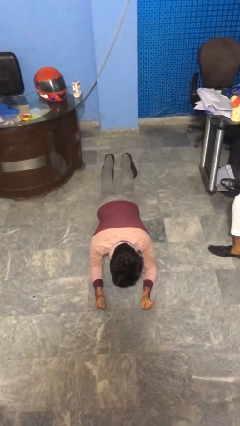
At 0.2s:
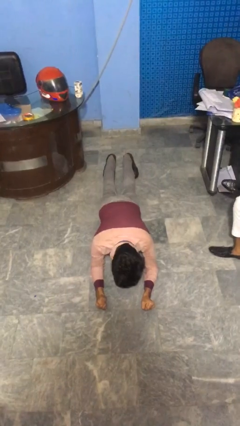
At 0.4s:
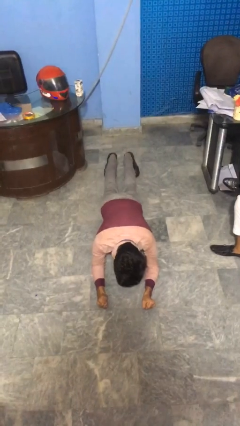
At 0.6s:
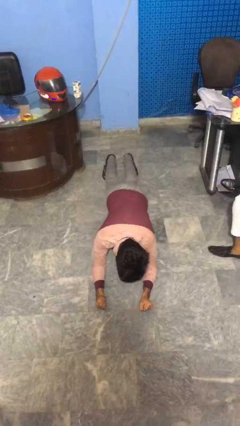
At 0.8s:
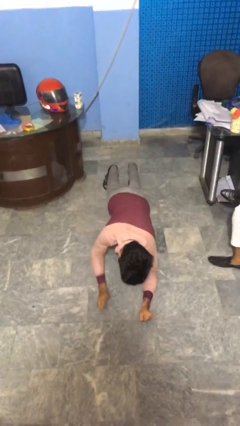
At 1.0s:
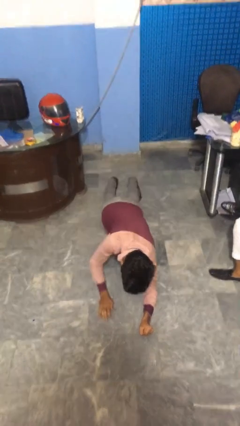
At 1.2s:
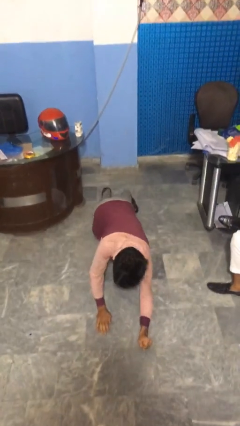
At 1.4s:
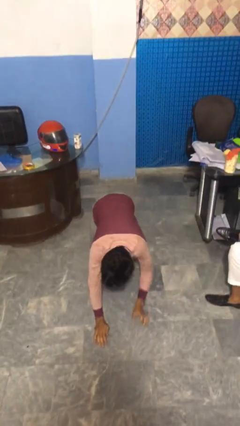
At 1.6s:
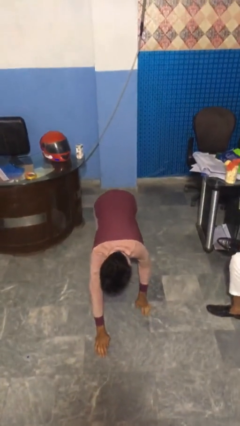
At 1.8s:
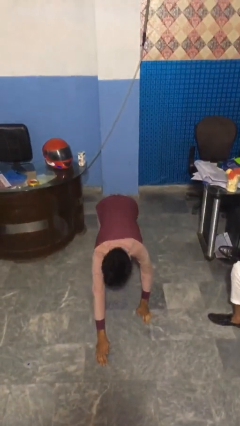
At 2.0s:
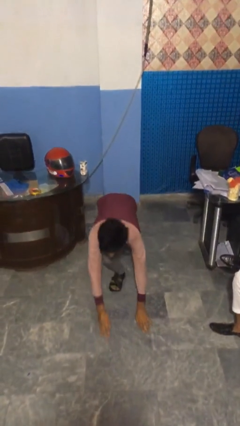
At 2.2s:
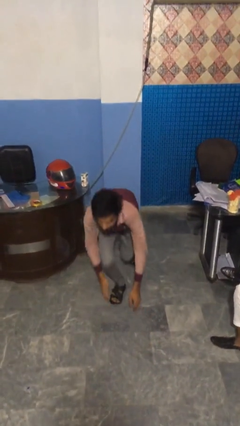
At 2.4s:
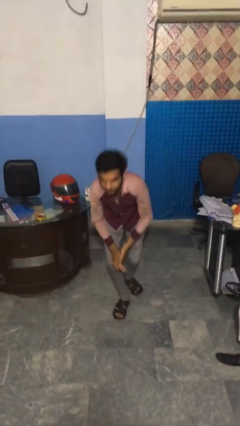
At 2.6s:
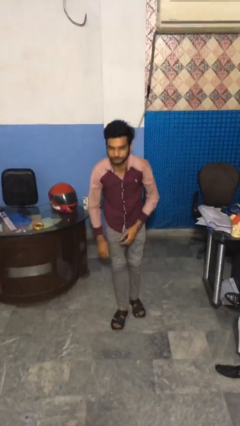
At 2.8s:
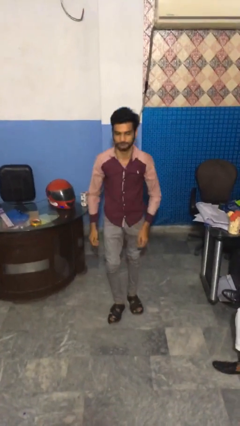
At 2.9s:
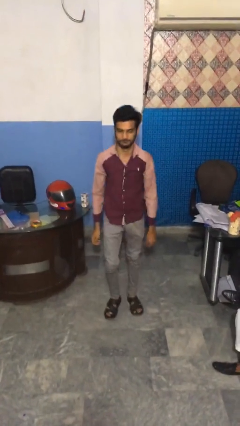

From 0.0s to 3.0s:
person stands up from floor

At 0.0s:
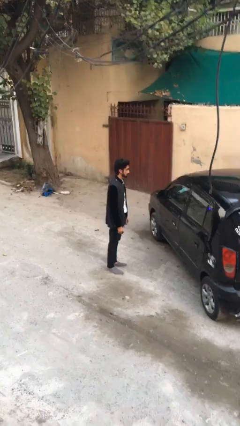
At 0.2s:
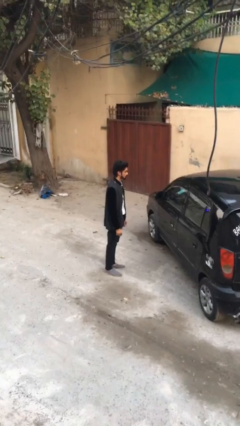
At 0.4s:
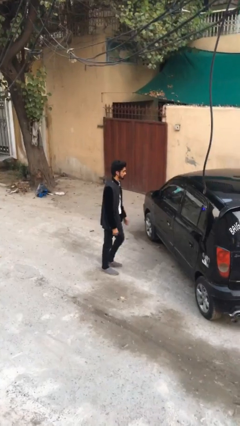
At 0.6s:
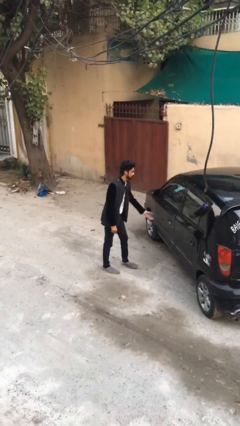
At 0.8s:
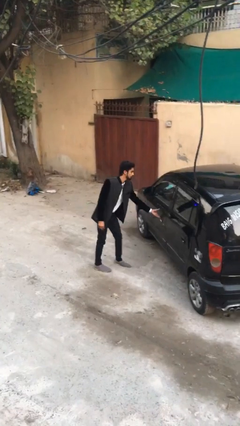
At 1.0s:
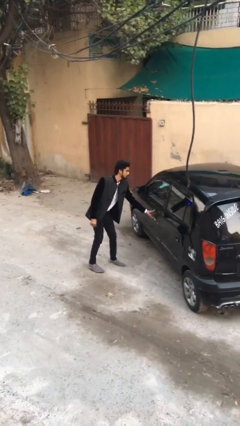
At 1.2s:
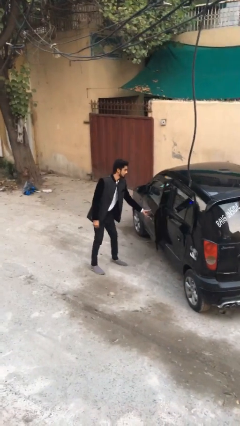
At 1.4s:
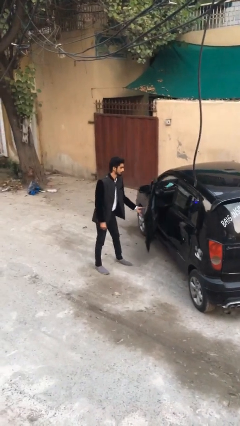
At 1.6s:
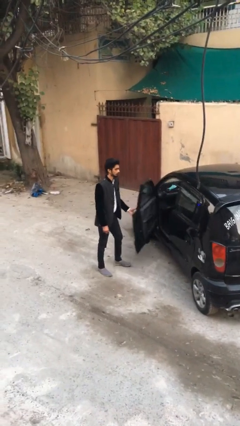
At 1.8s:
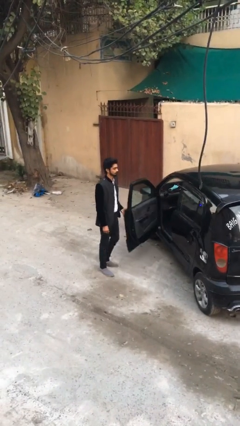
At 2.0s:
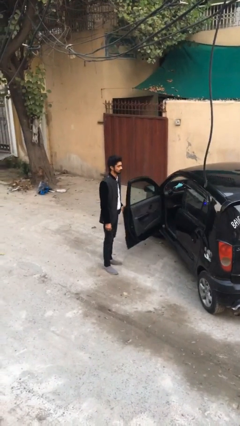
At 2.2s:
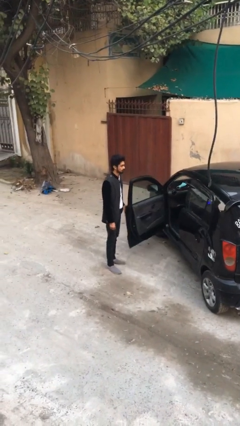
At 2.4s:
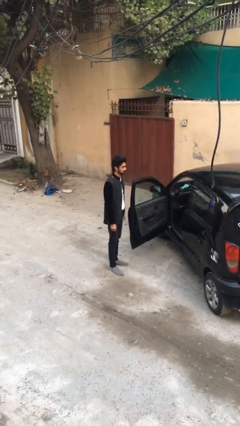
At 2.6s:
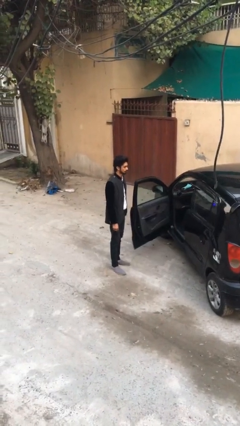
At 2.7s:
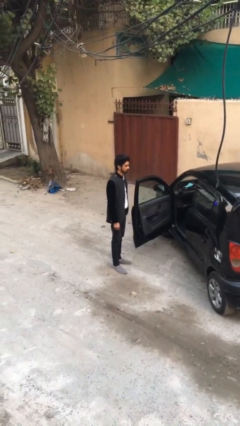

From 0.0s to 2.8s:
person opens car door

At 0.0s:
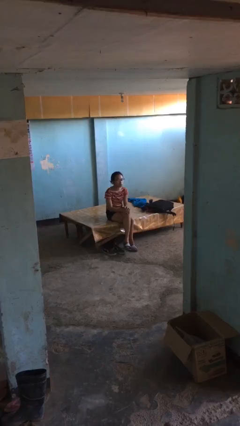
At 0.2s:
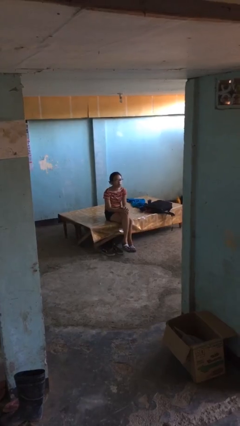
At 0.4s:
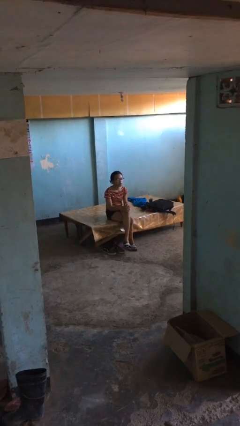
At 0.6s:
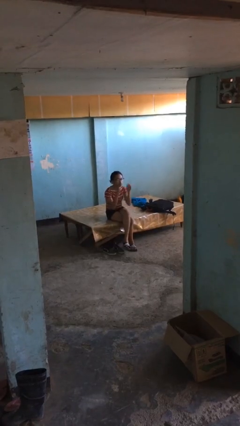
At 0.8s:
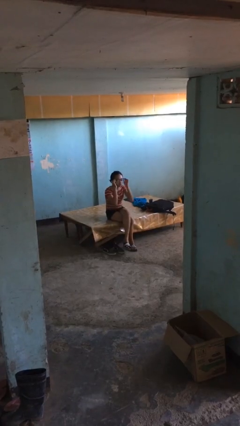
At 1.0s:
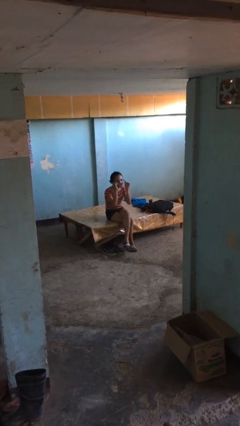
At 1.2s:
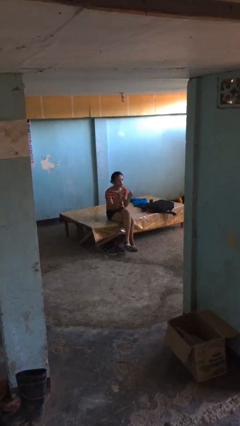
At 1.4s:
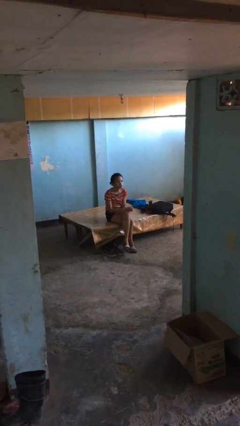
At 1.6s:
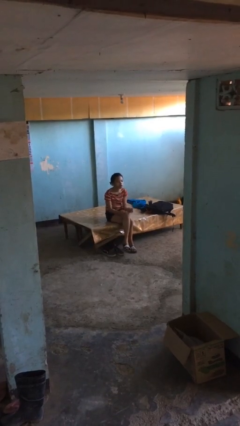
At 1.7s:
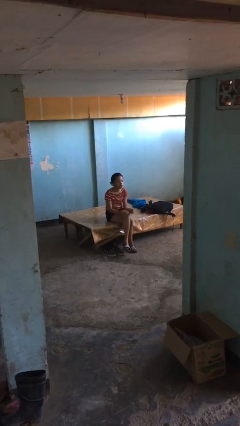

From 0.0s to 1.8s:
person takes off glasses

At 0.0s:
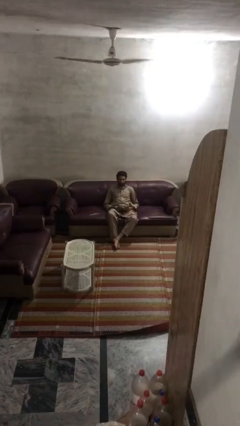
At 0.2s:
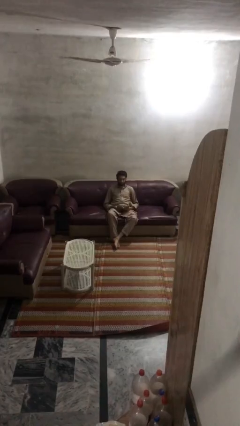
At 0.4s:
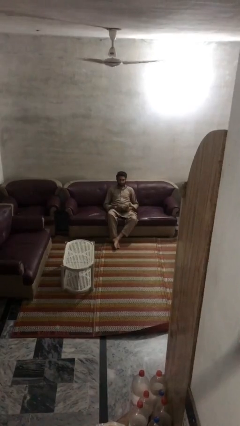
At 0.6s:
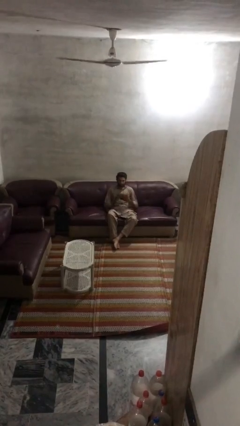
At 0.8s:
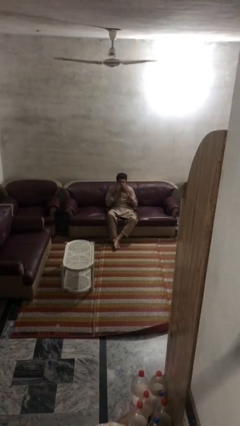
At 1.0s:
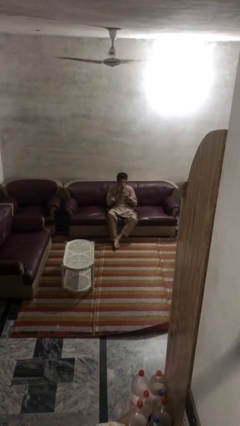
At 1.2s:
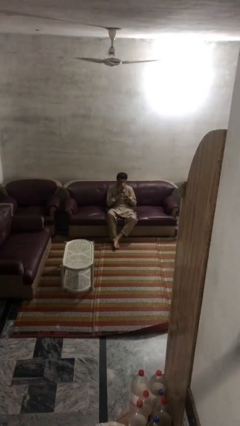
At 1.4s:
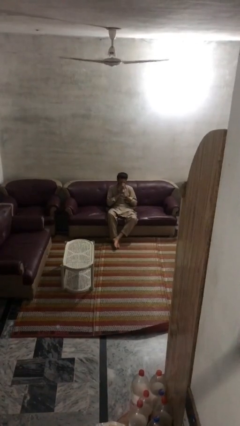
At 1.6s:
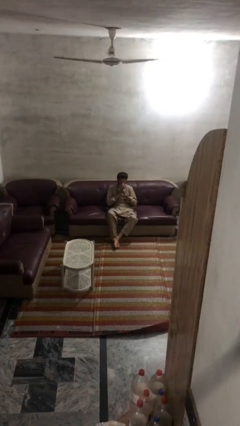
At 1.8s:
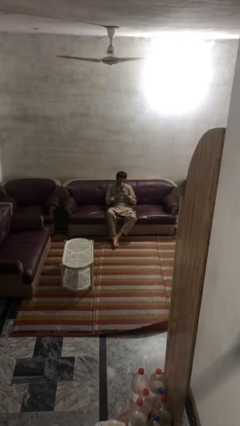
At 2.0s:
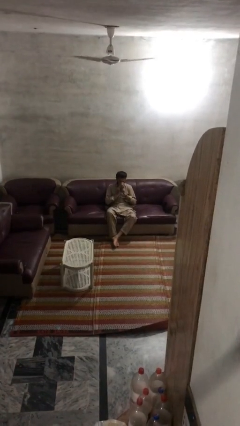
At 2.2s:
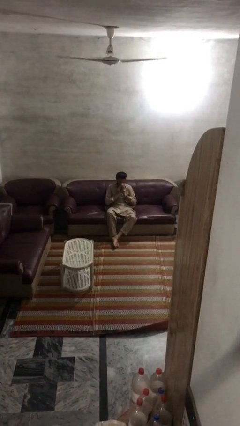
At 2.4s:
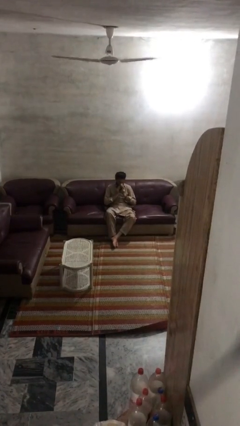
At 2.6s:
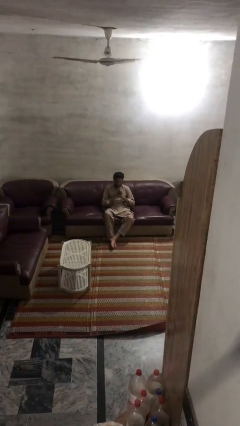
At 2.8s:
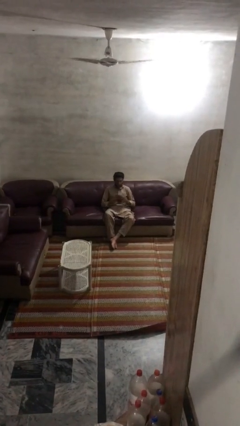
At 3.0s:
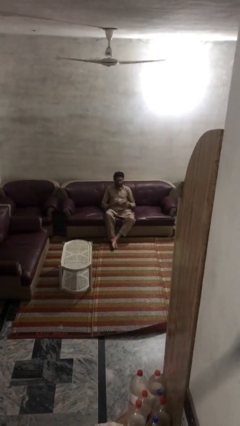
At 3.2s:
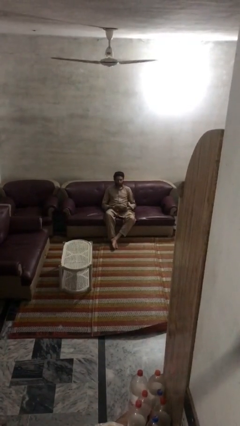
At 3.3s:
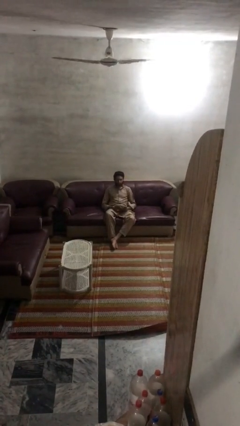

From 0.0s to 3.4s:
person blows nose

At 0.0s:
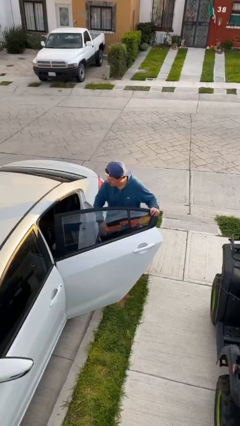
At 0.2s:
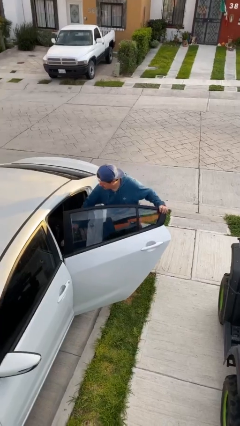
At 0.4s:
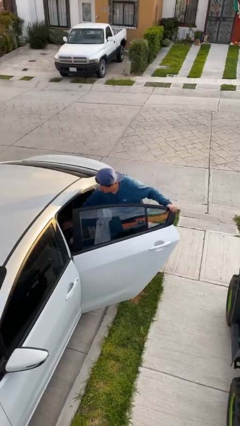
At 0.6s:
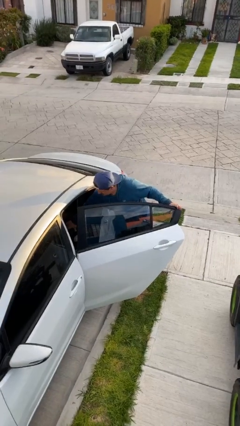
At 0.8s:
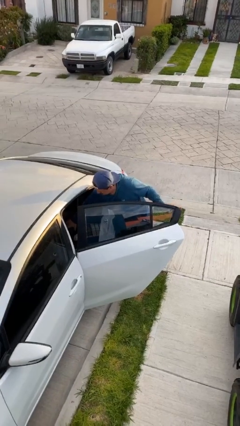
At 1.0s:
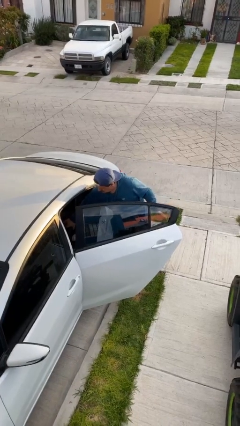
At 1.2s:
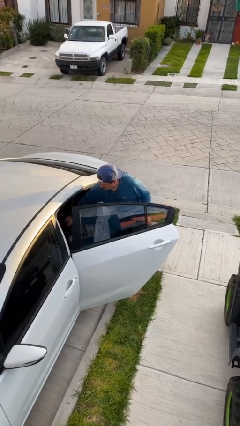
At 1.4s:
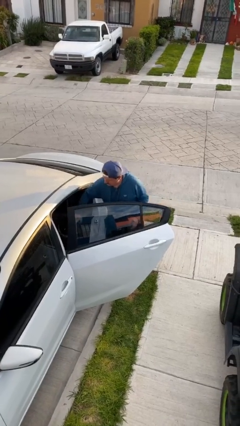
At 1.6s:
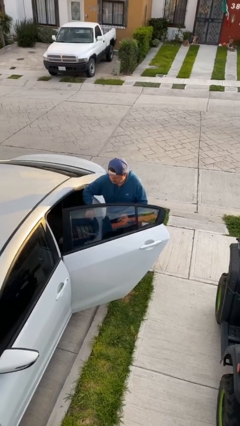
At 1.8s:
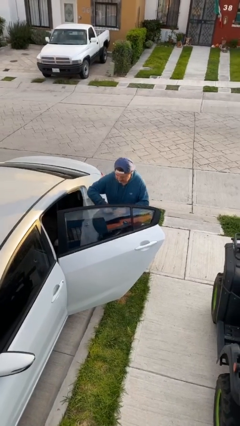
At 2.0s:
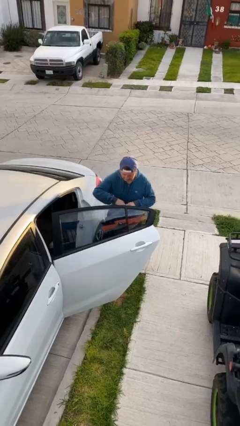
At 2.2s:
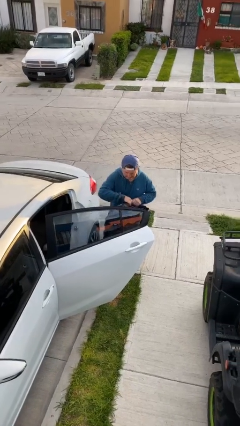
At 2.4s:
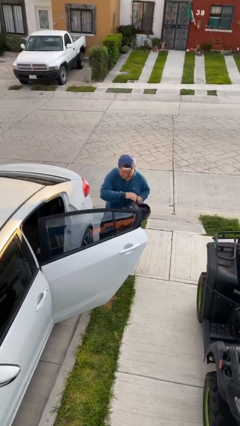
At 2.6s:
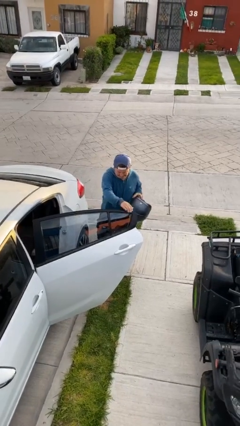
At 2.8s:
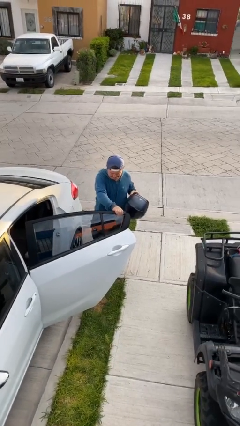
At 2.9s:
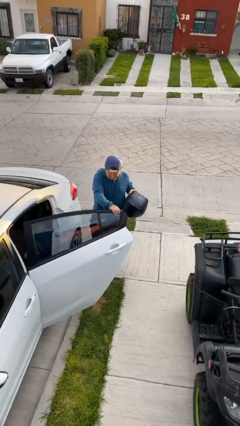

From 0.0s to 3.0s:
person unloads car

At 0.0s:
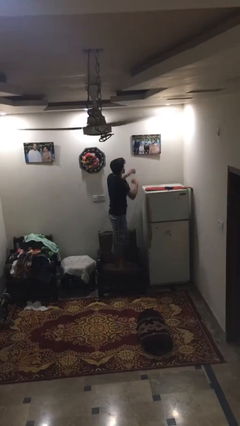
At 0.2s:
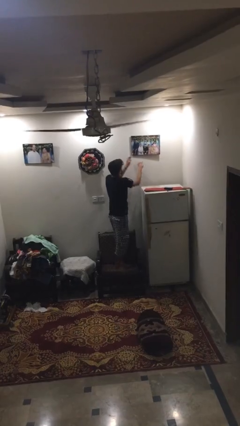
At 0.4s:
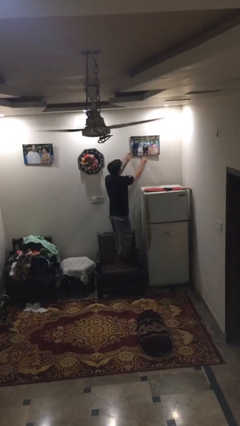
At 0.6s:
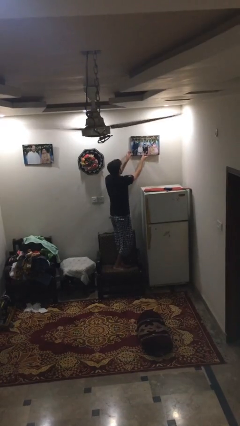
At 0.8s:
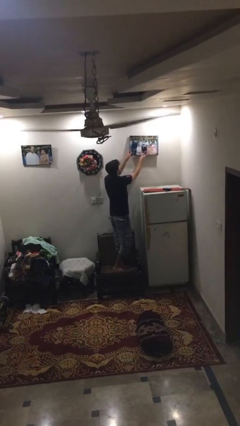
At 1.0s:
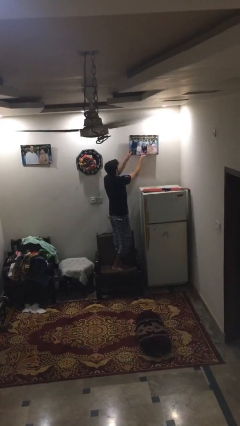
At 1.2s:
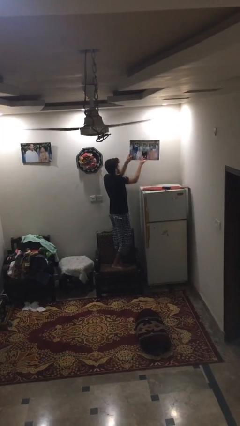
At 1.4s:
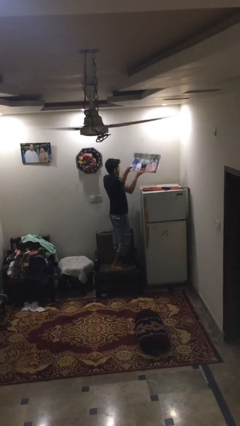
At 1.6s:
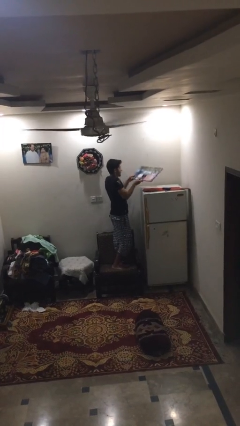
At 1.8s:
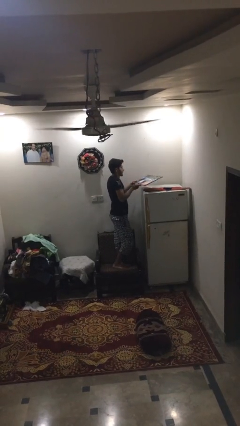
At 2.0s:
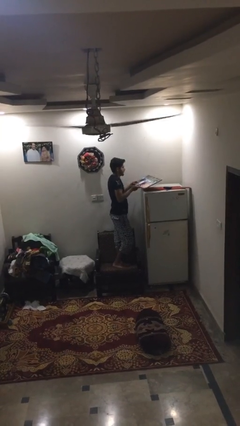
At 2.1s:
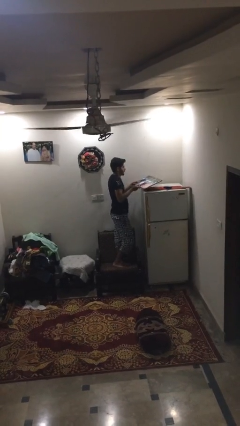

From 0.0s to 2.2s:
person takes down picture frame

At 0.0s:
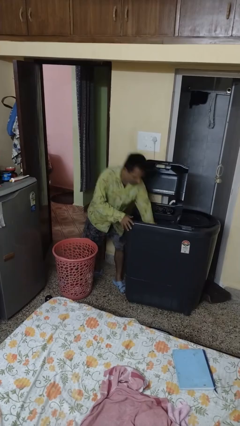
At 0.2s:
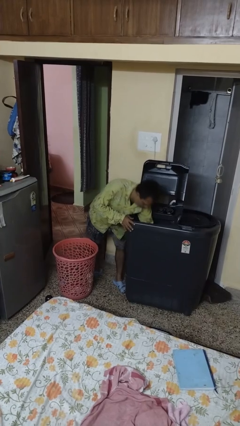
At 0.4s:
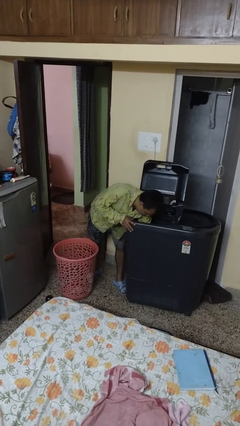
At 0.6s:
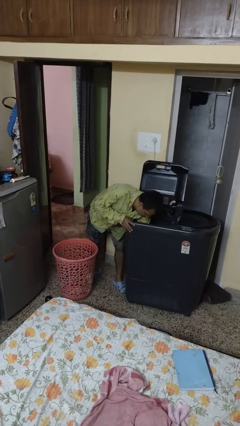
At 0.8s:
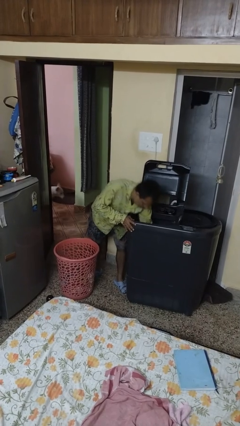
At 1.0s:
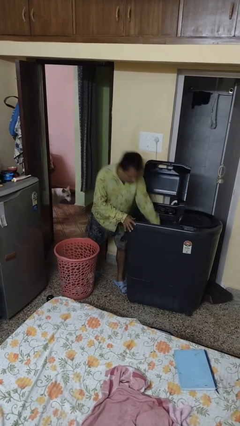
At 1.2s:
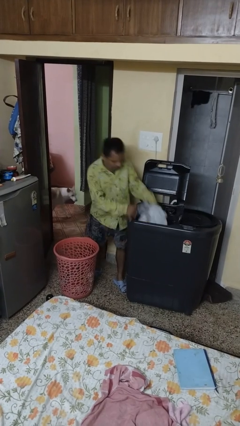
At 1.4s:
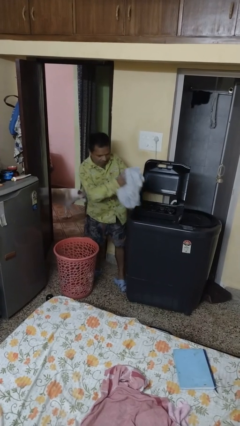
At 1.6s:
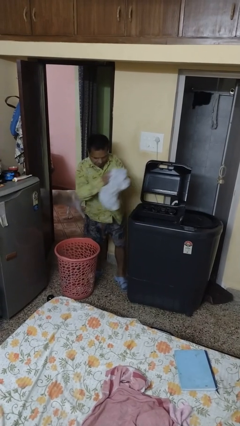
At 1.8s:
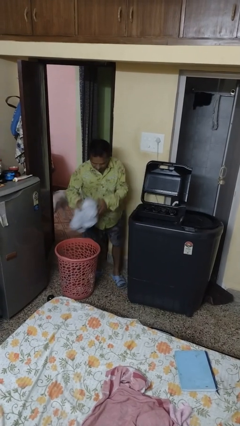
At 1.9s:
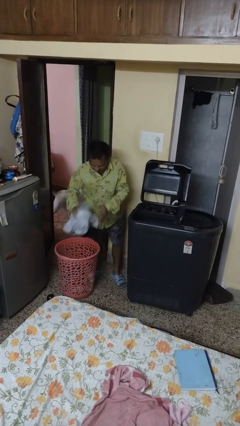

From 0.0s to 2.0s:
person unloads clotheswasher
